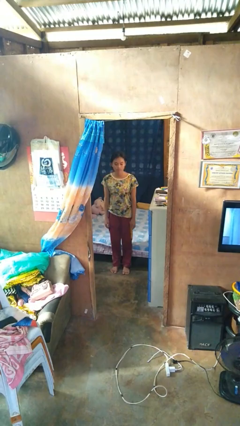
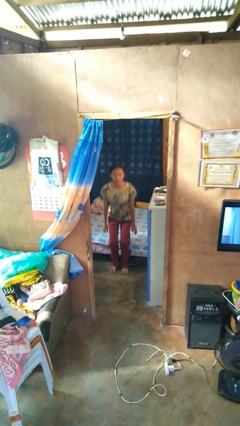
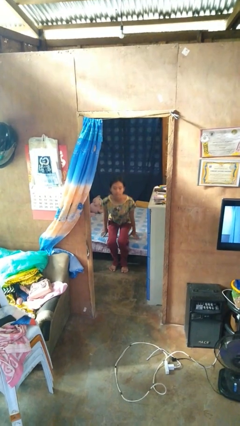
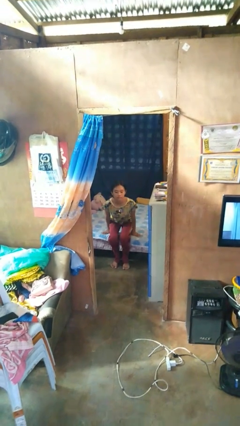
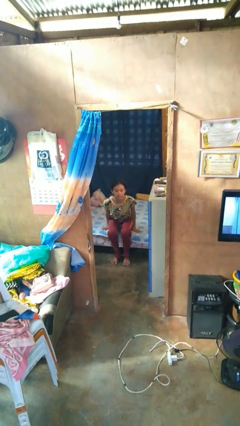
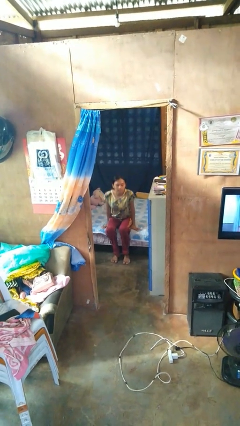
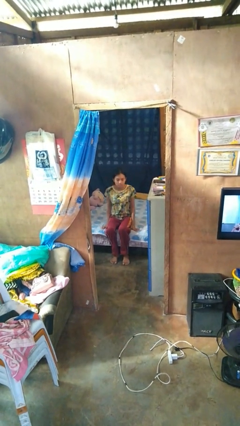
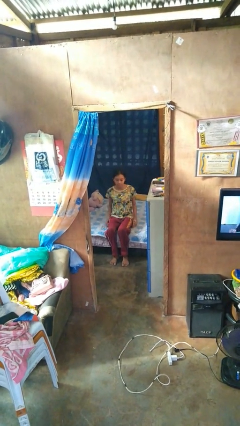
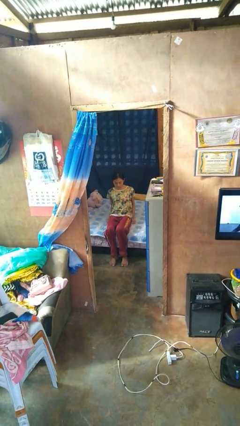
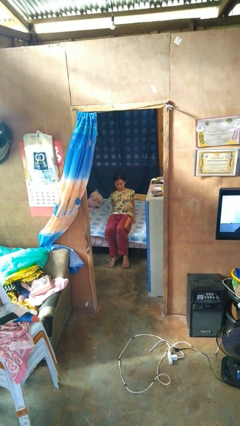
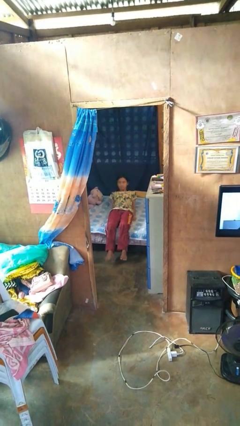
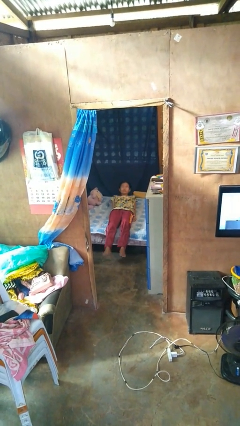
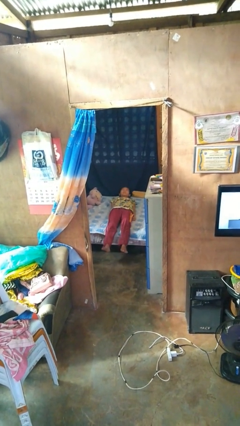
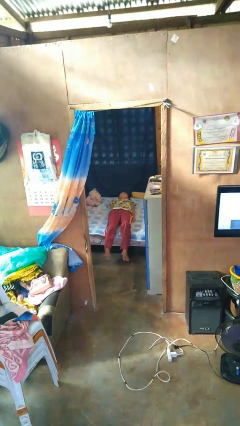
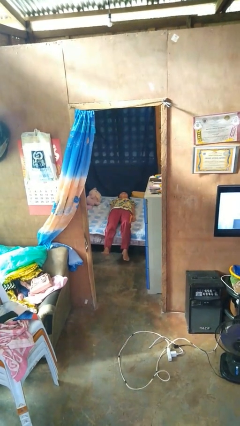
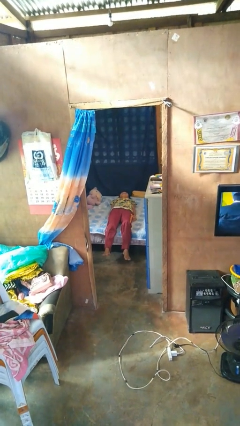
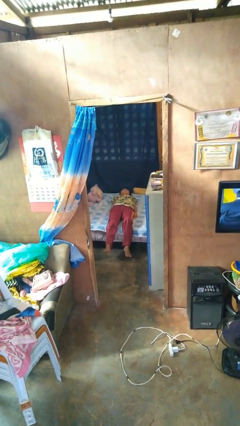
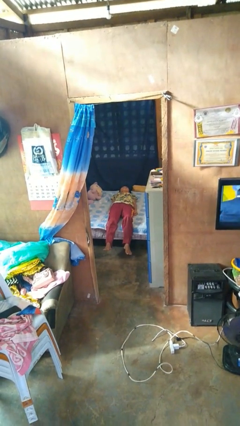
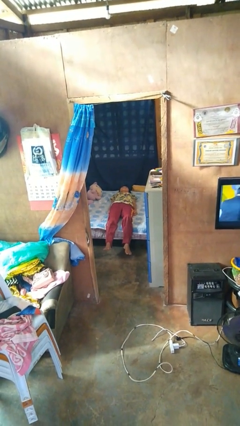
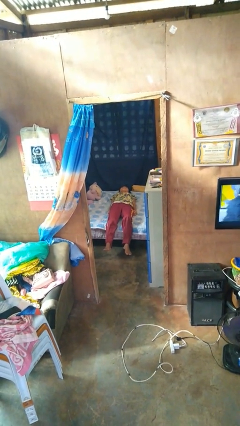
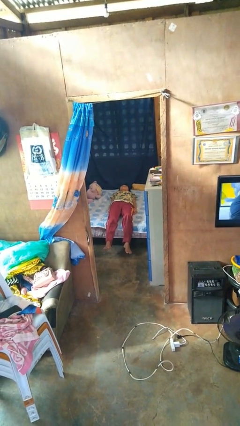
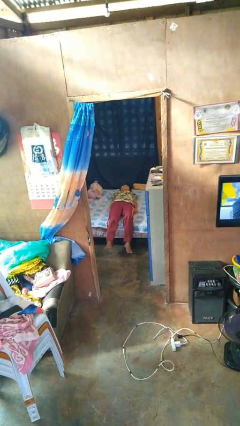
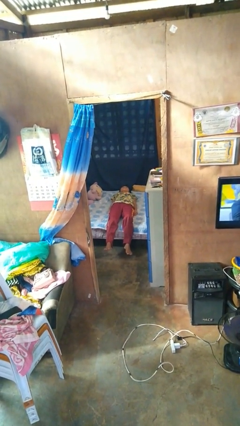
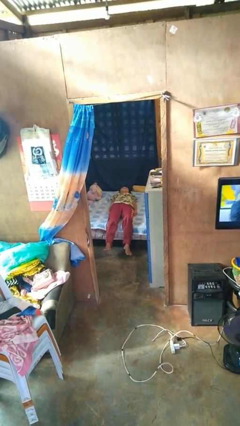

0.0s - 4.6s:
person lies down on bed

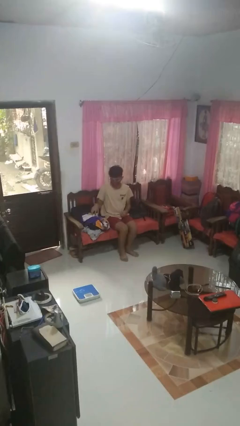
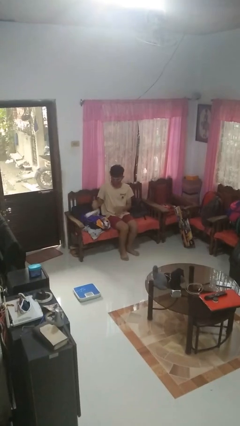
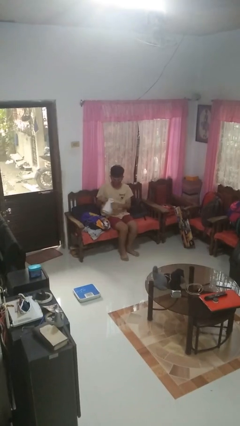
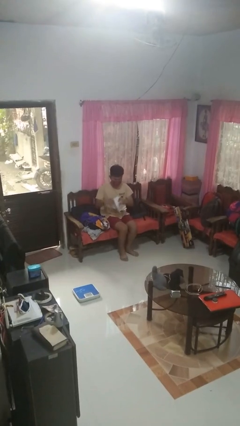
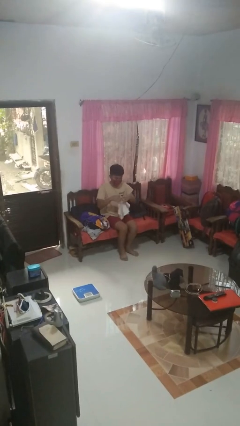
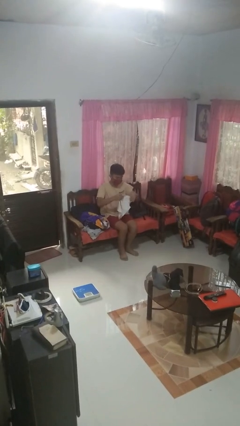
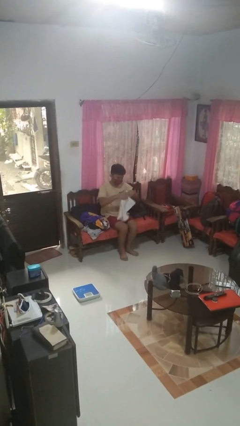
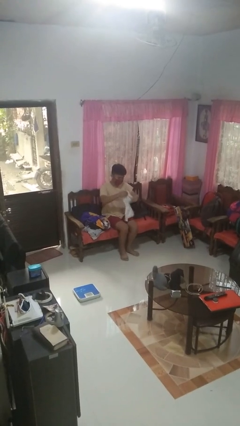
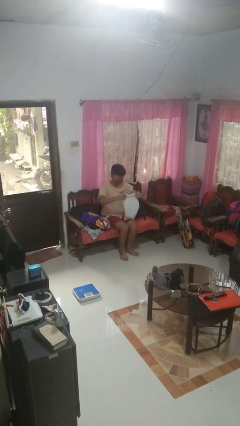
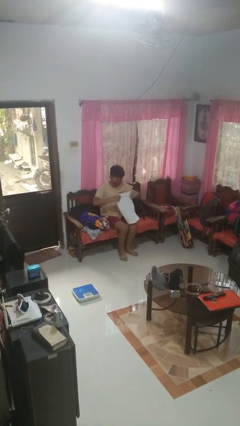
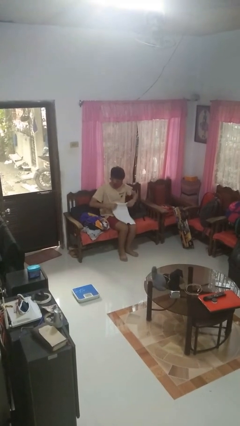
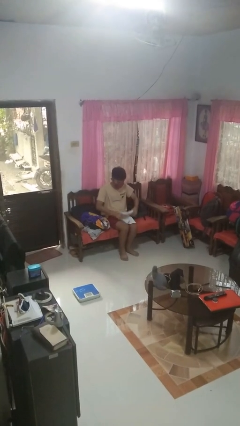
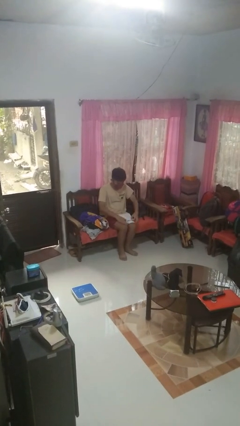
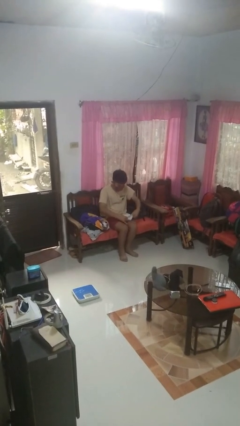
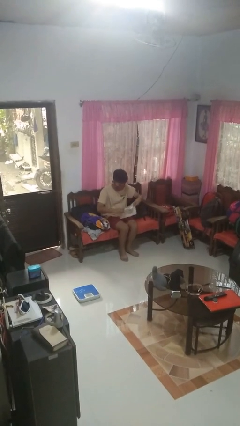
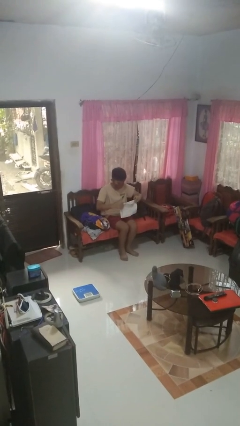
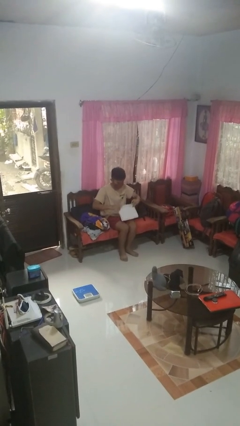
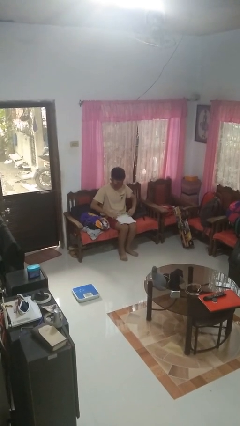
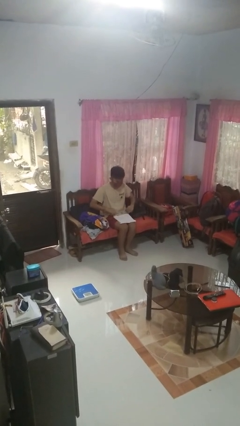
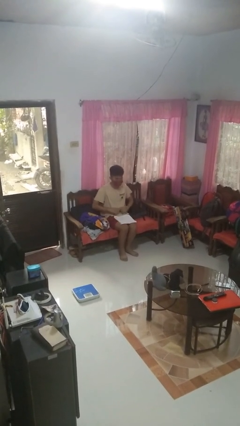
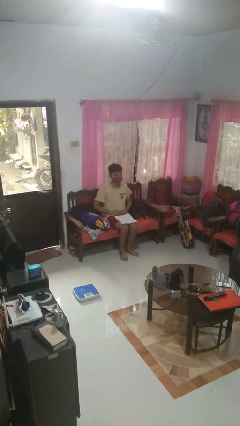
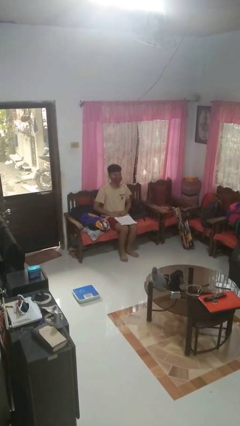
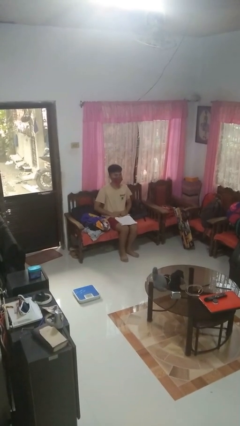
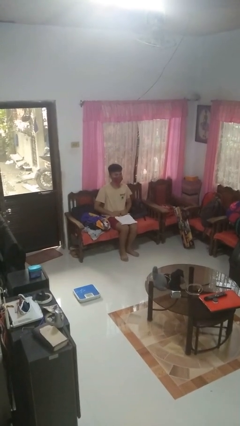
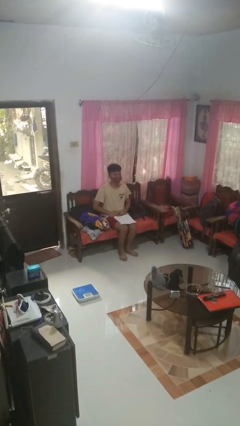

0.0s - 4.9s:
person folds towel

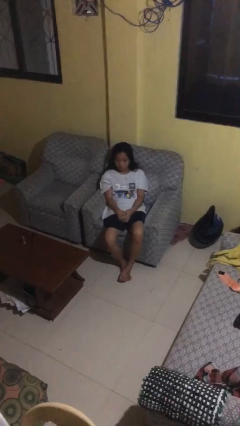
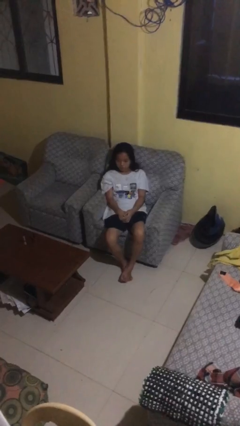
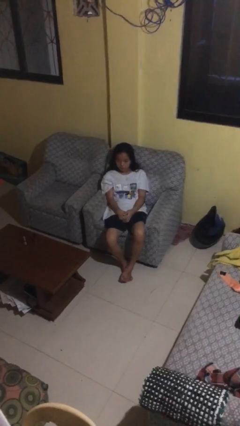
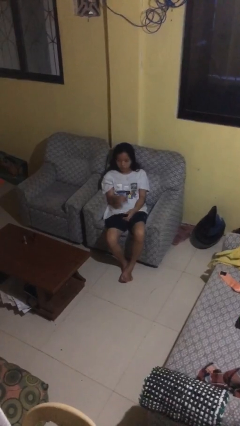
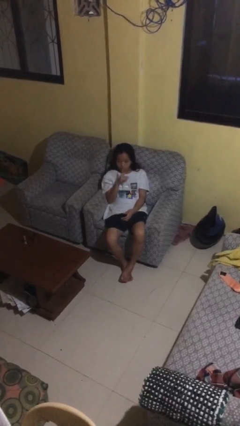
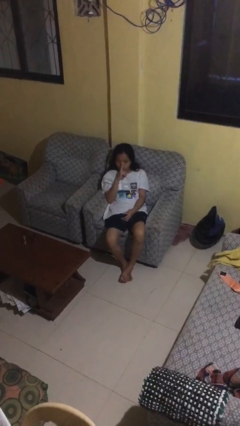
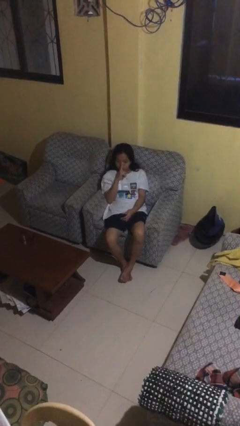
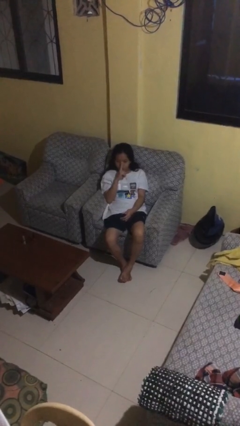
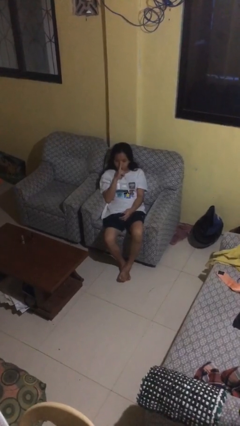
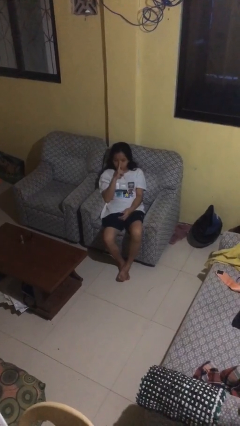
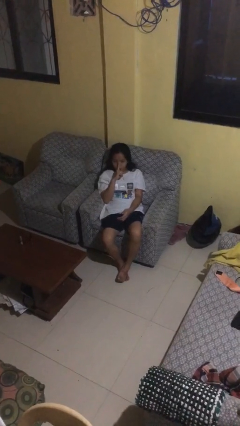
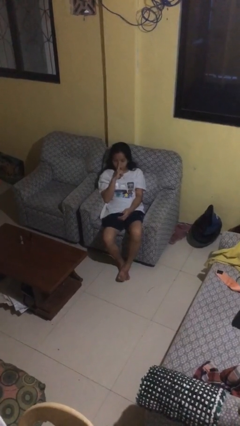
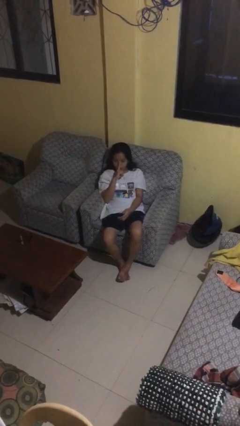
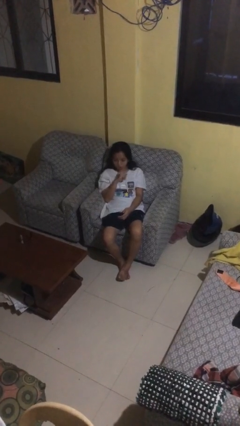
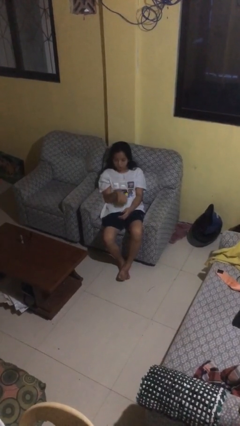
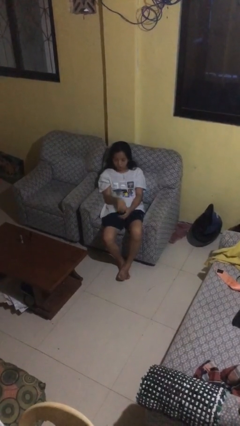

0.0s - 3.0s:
person gestures be quiet

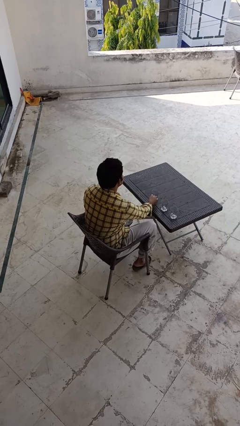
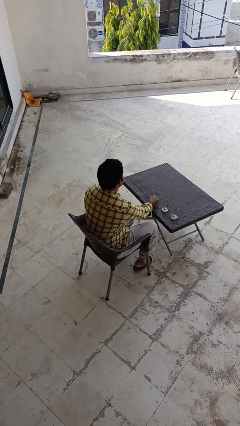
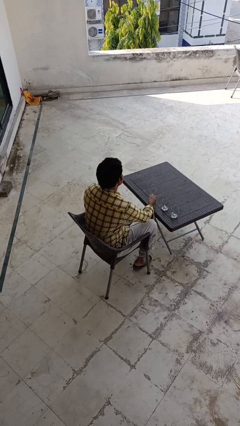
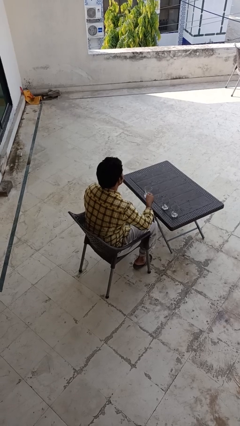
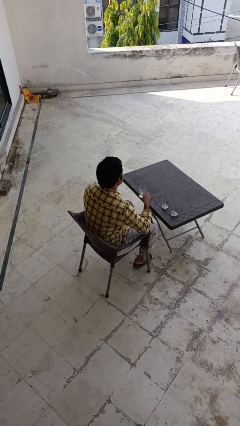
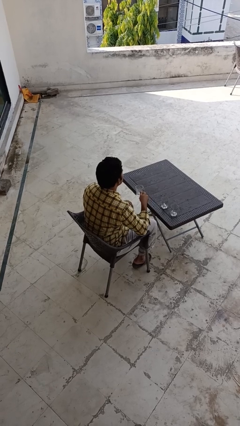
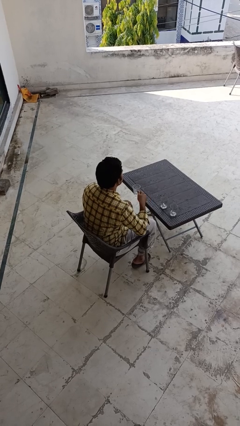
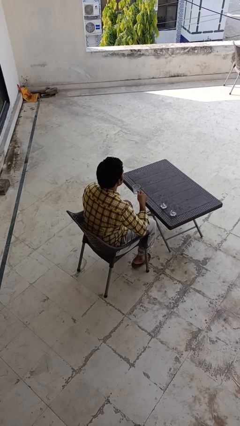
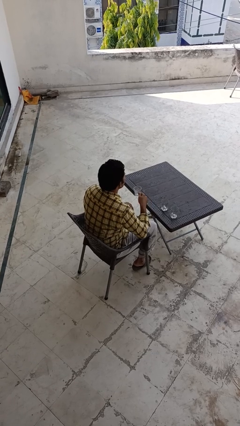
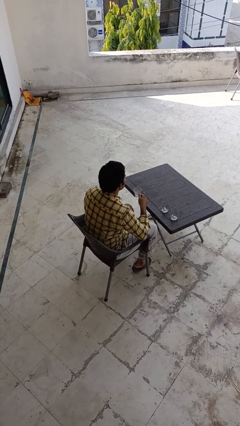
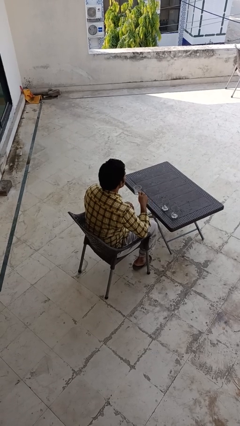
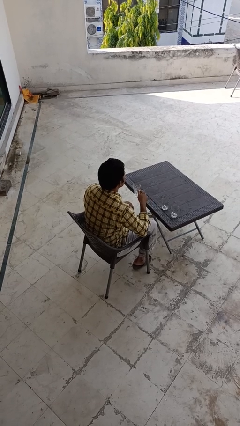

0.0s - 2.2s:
person picks up object from table

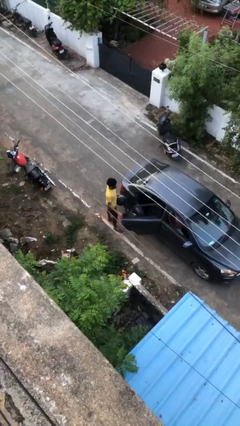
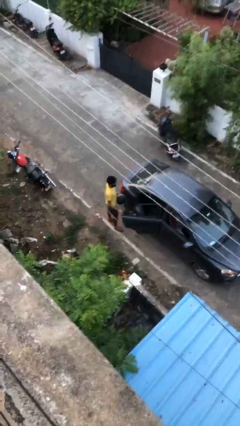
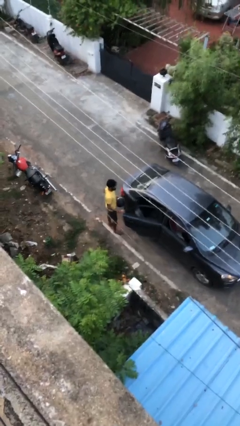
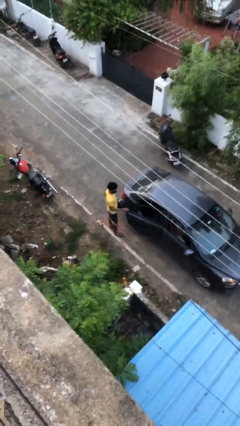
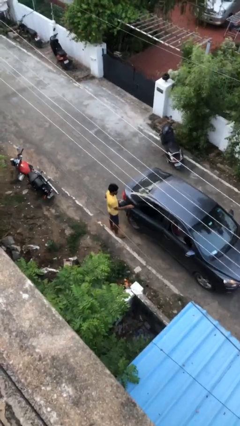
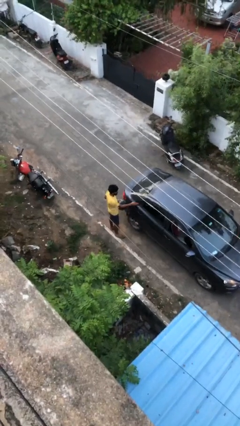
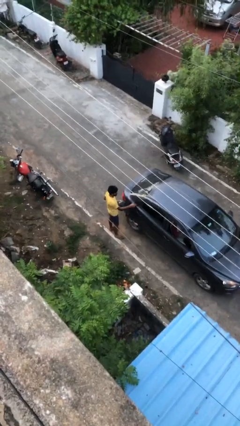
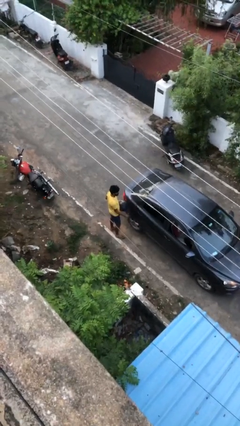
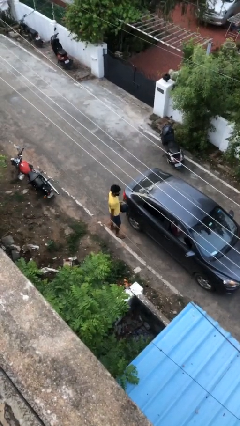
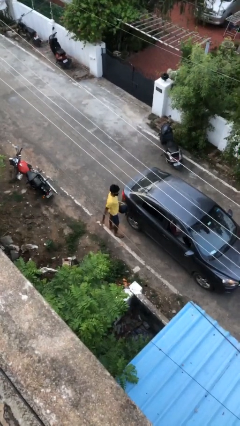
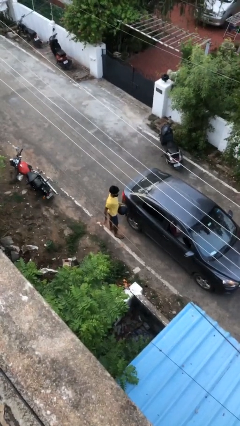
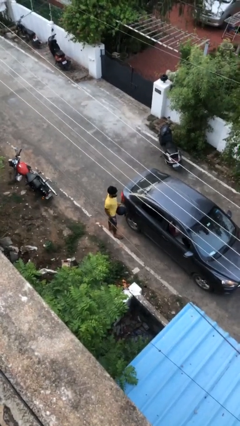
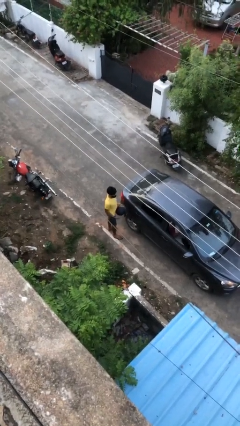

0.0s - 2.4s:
person closes car door
